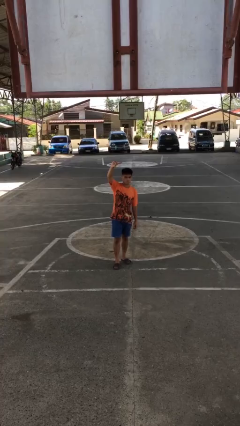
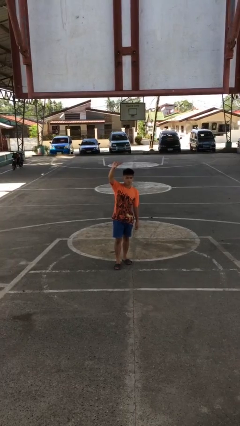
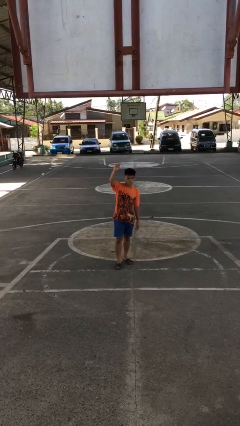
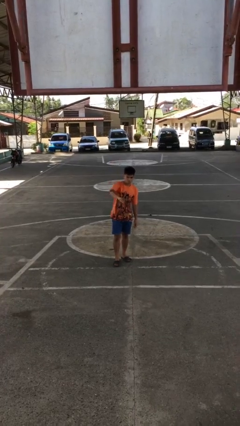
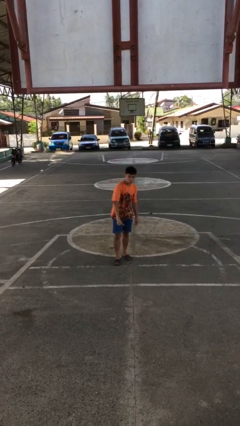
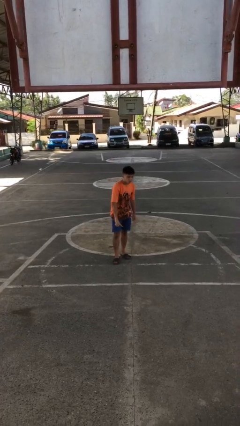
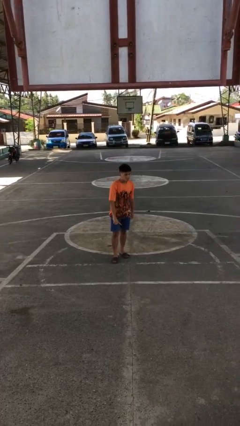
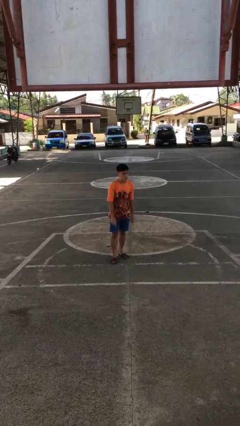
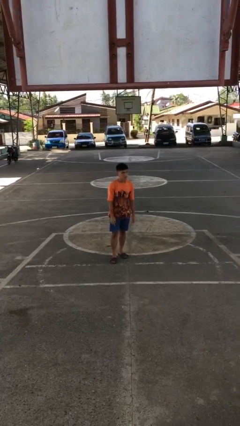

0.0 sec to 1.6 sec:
person gestures swipe down

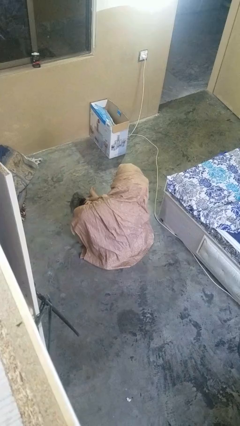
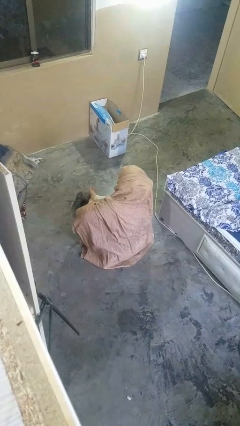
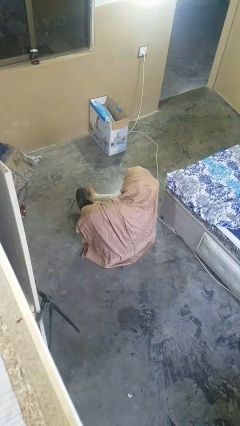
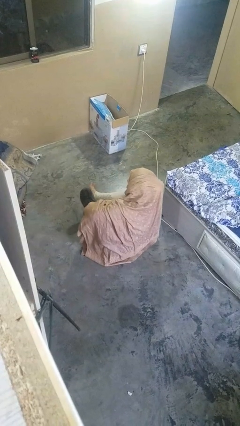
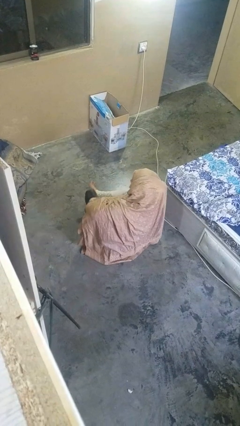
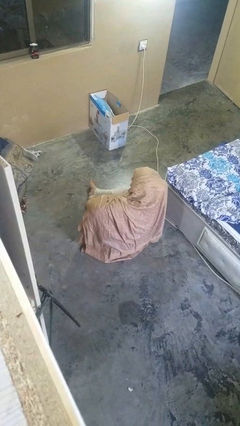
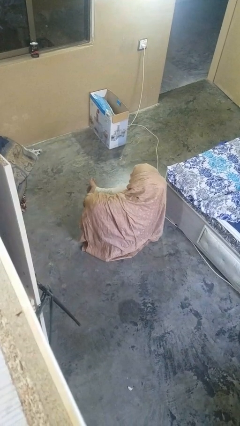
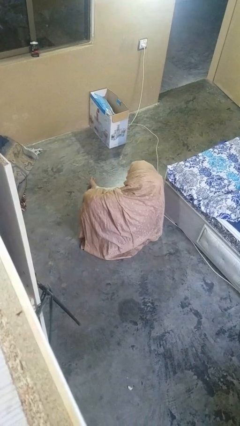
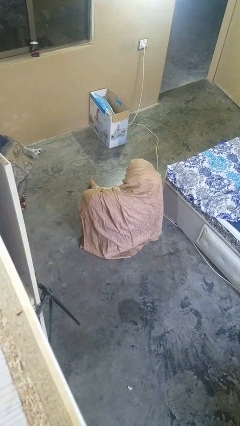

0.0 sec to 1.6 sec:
person puts on shoes

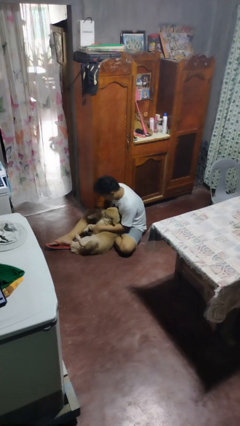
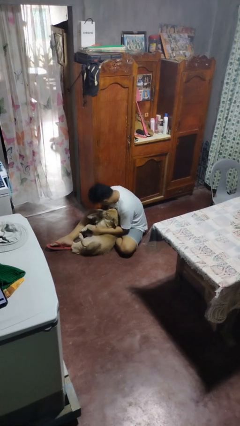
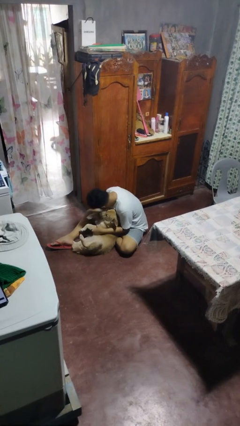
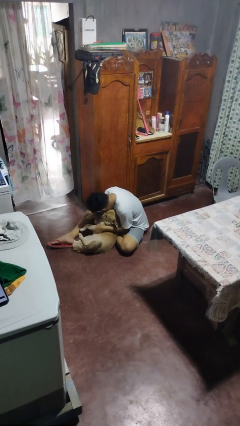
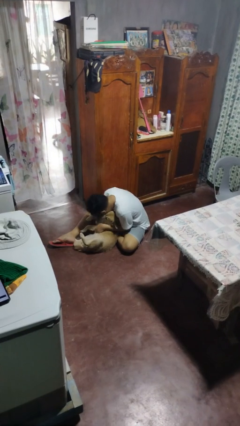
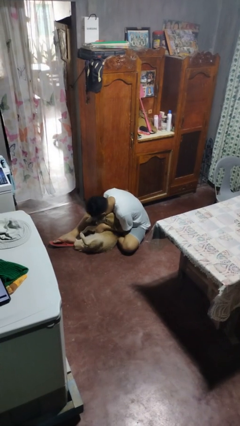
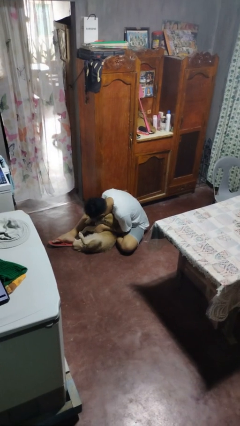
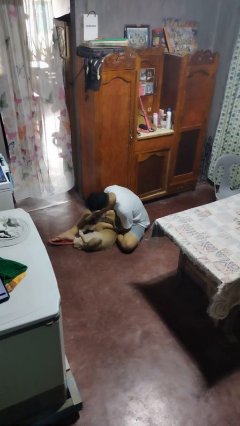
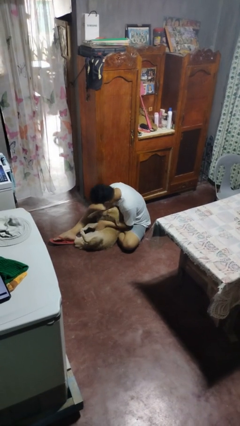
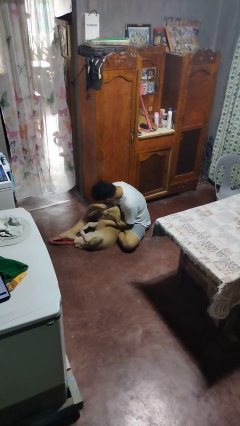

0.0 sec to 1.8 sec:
person hugs dog

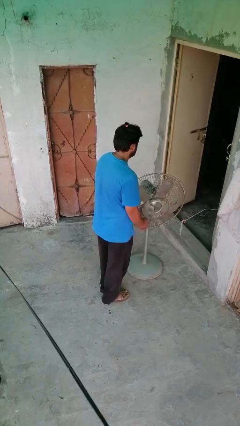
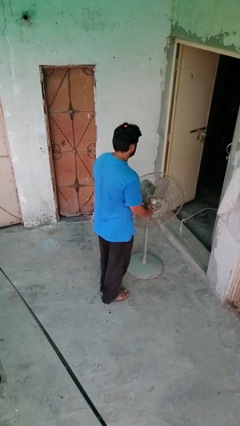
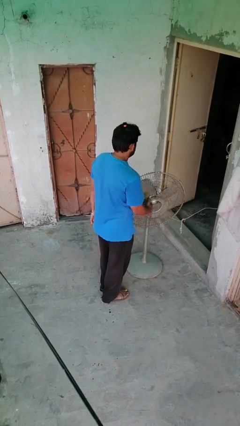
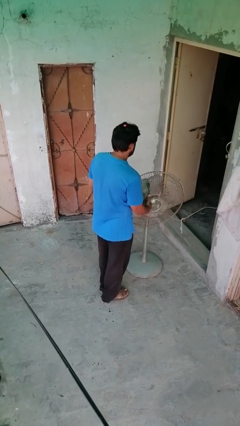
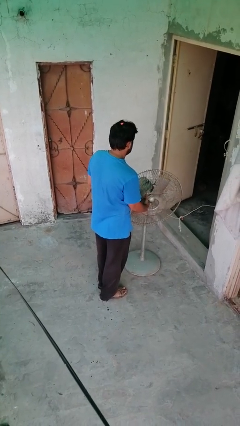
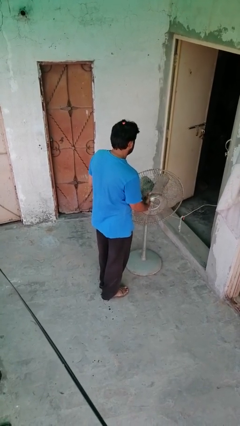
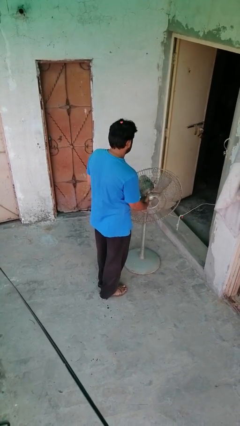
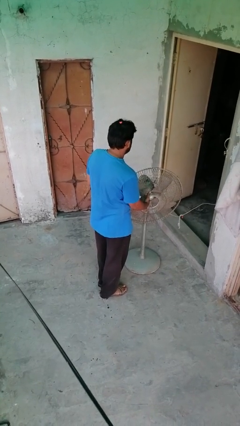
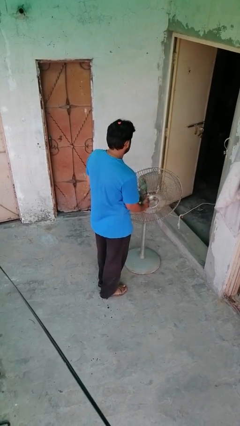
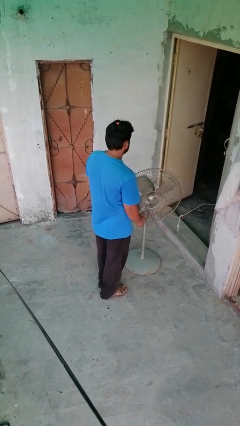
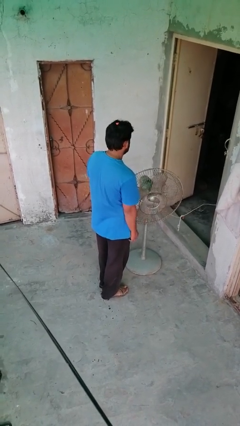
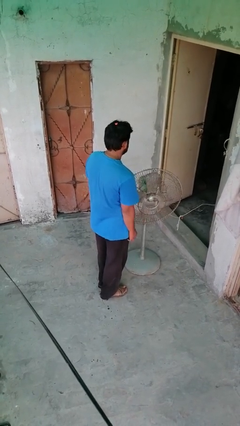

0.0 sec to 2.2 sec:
person turns off fan

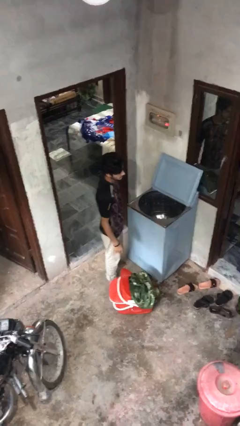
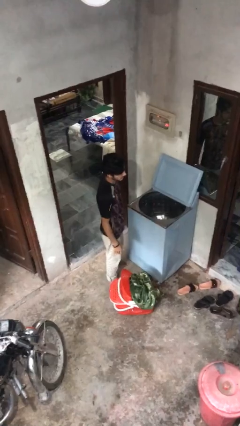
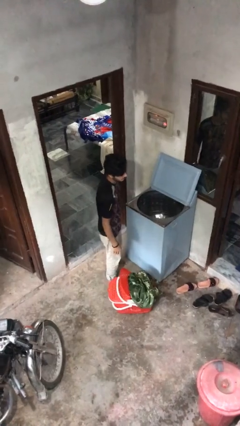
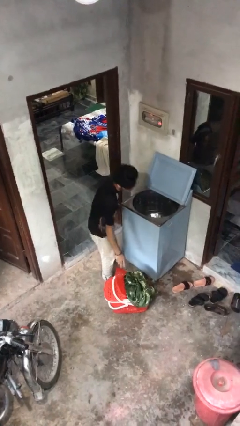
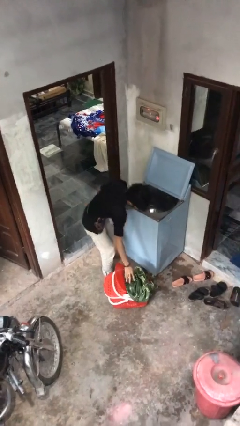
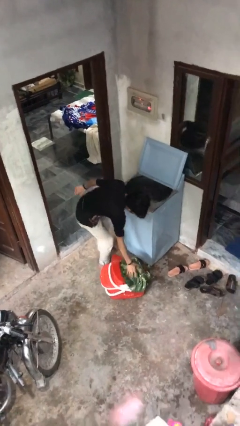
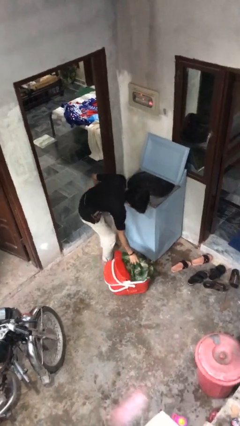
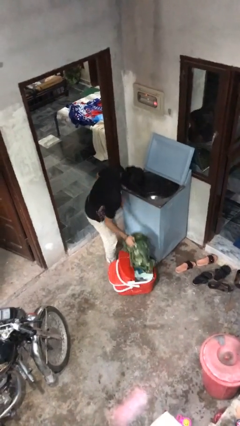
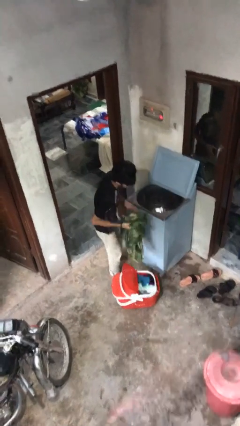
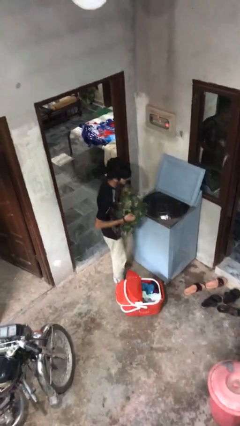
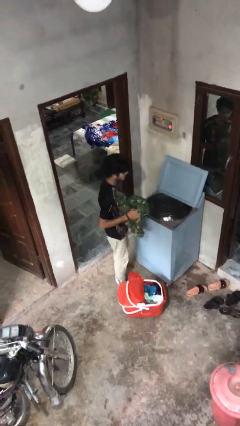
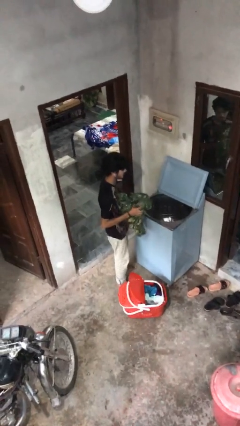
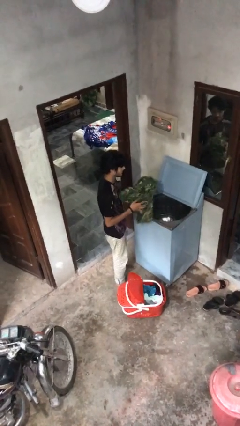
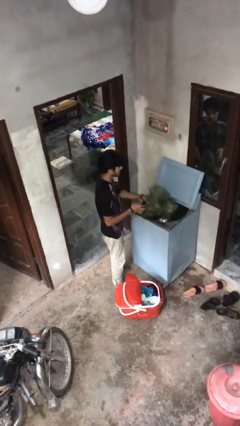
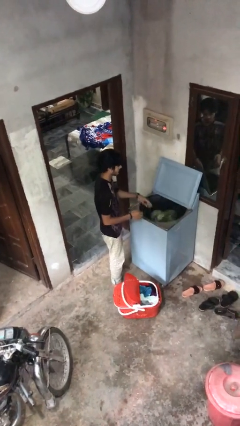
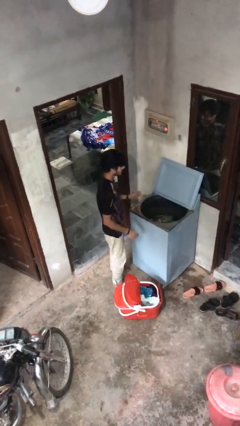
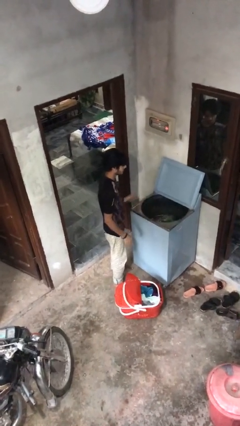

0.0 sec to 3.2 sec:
person loads clotheswasher

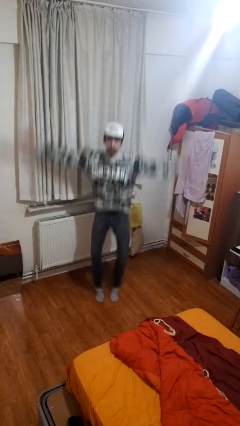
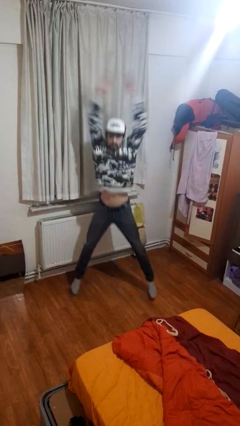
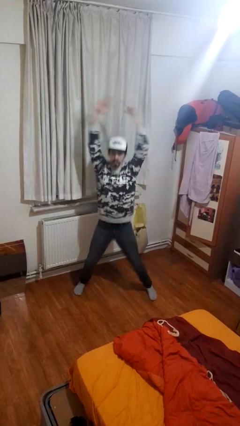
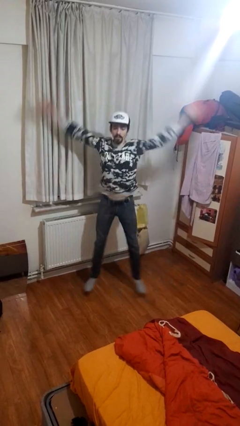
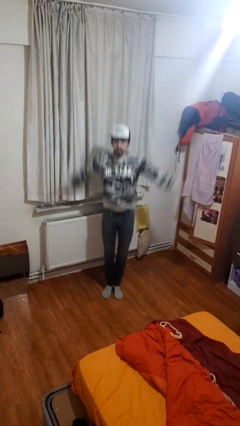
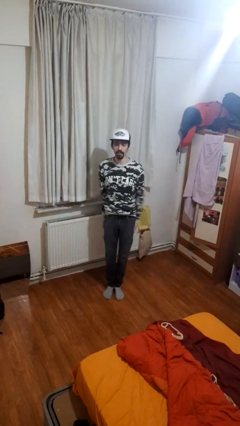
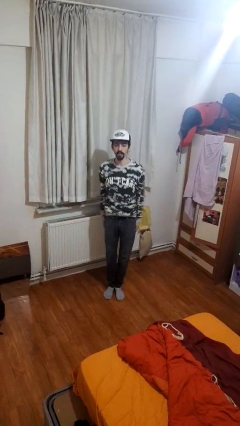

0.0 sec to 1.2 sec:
person exercises with jumping jacks

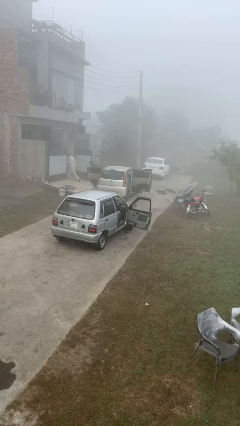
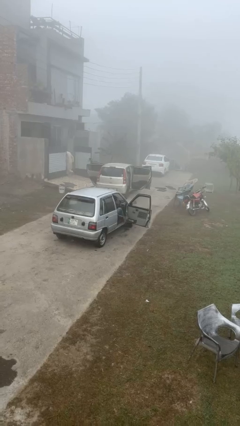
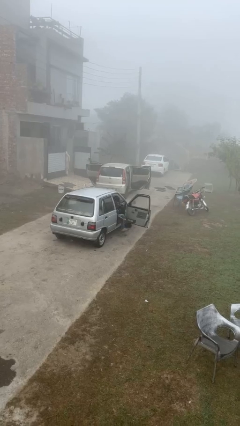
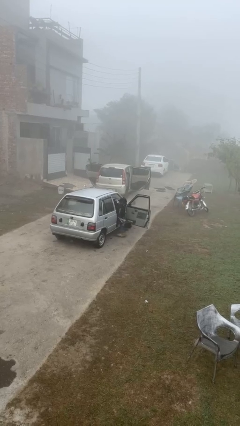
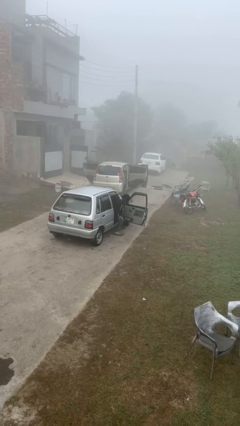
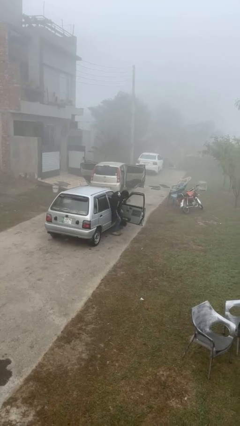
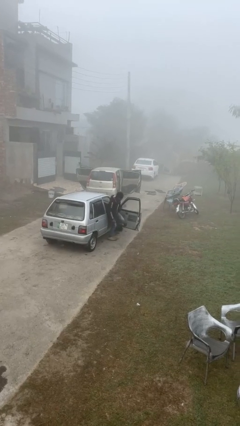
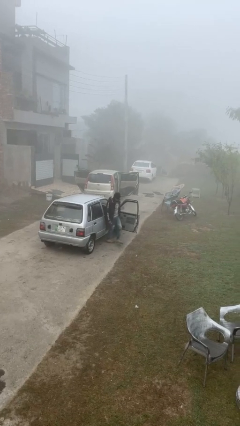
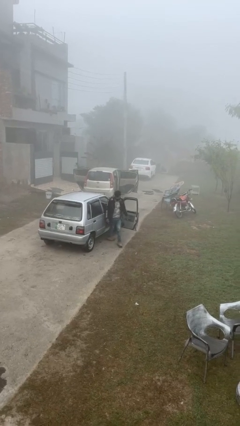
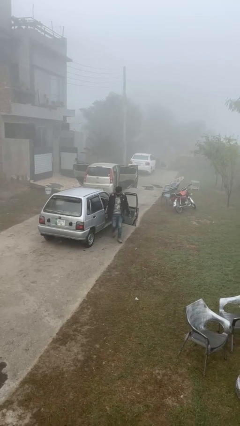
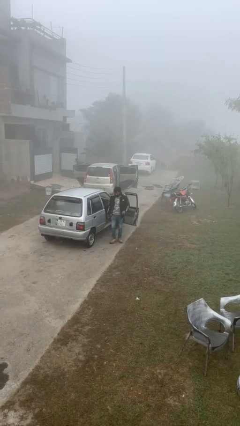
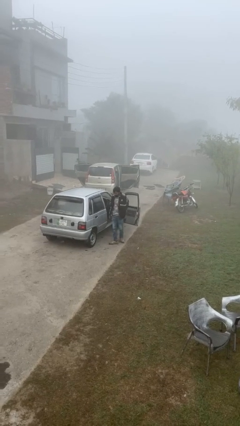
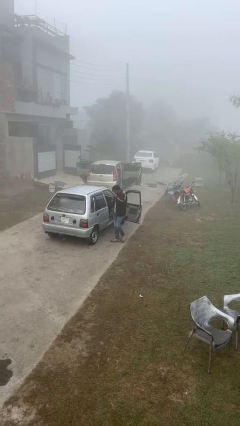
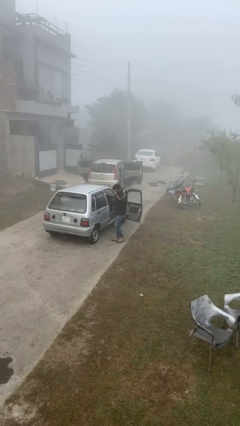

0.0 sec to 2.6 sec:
person exits car

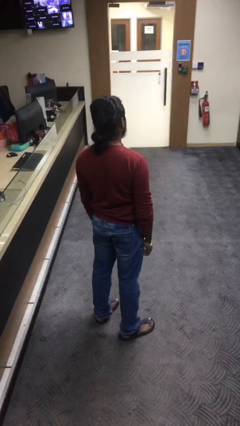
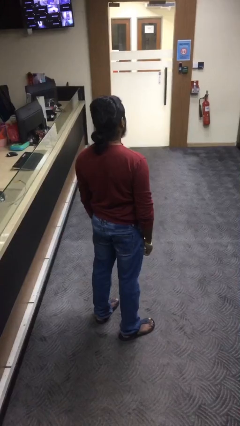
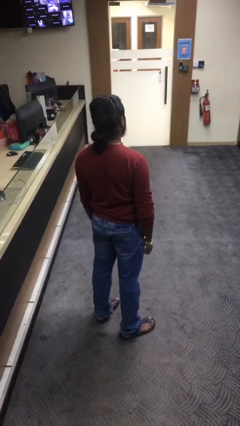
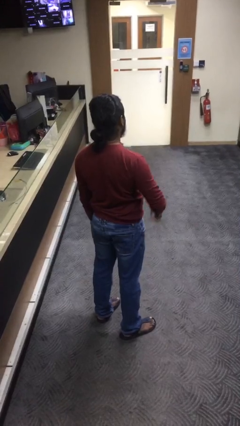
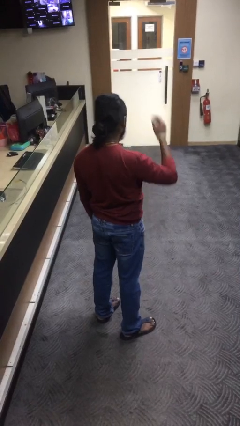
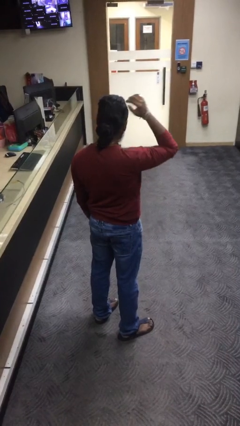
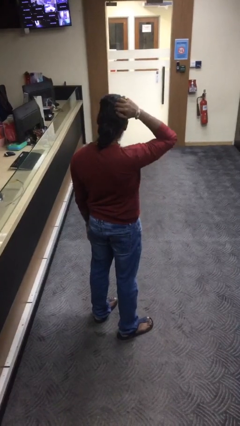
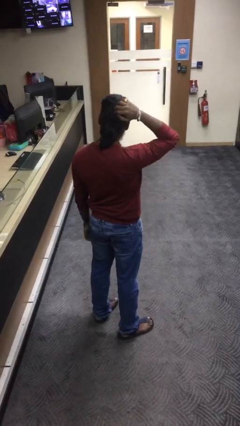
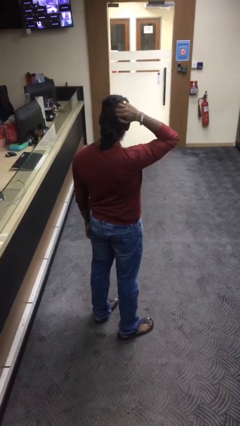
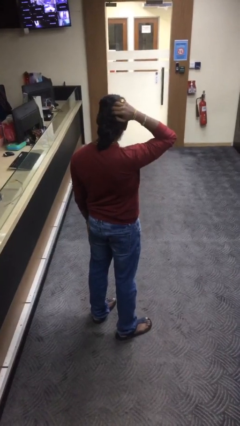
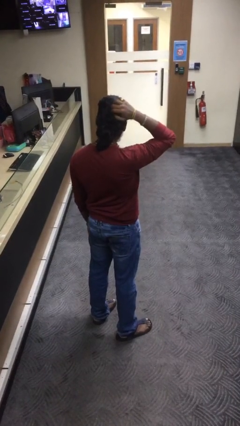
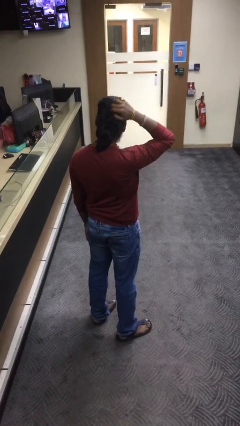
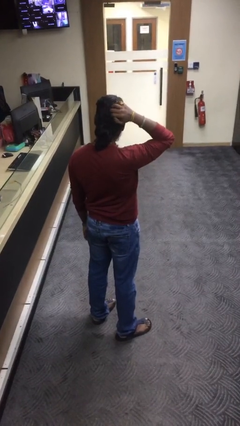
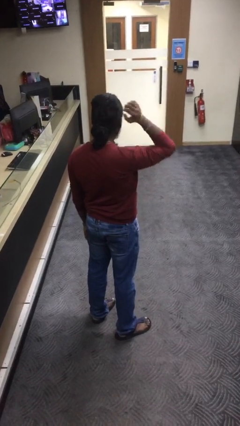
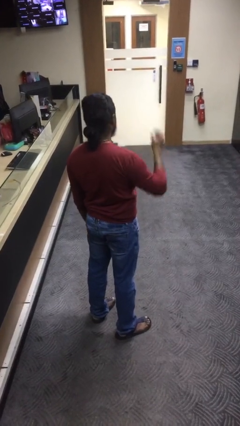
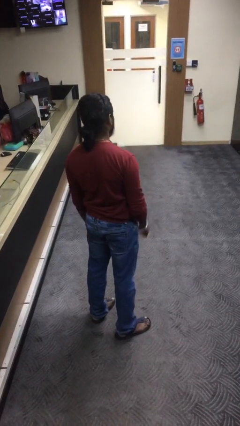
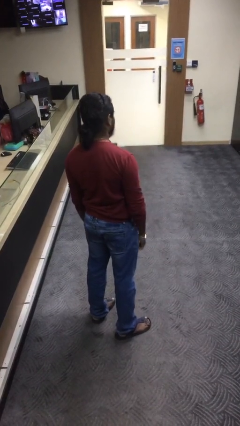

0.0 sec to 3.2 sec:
person scratches face
